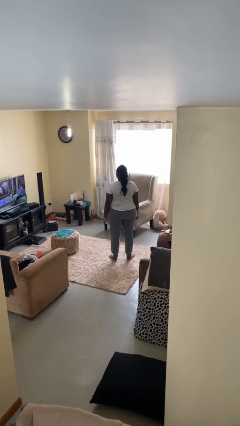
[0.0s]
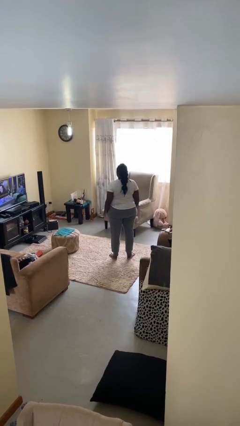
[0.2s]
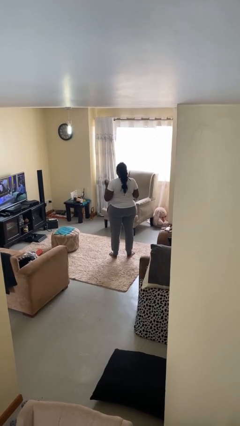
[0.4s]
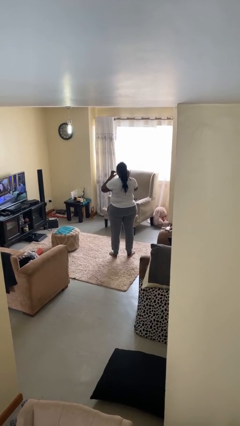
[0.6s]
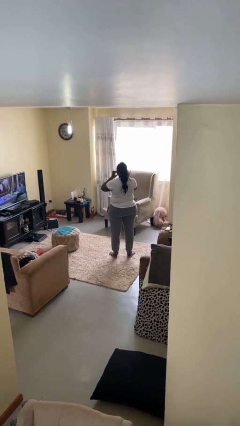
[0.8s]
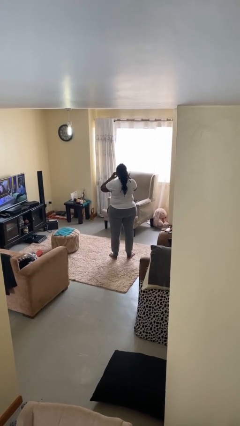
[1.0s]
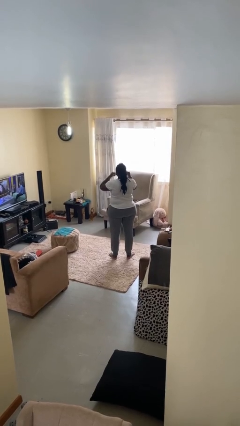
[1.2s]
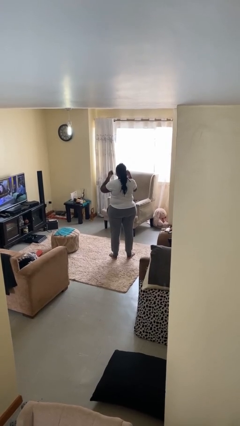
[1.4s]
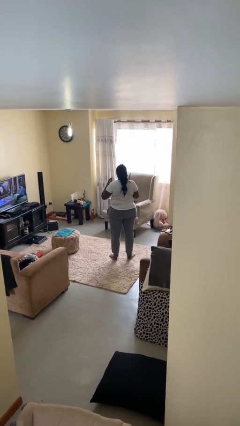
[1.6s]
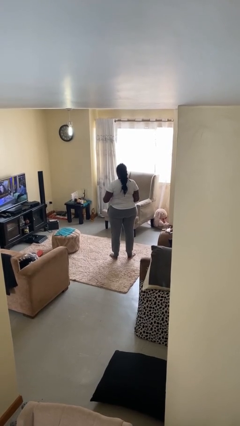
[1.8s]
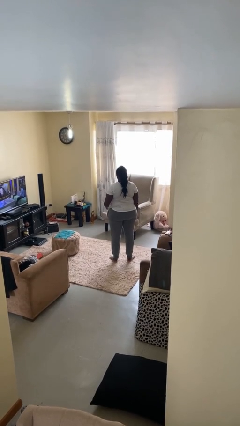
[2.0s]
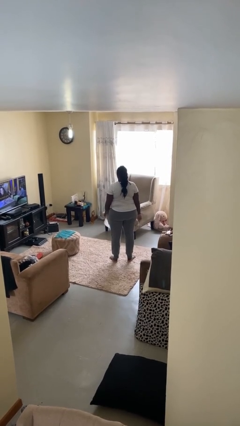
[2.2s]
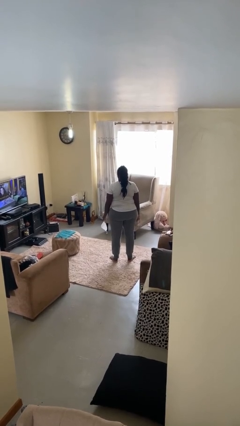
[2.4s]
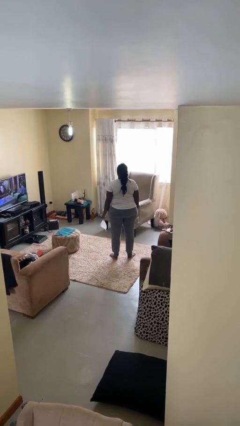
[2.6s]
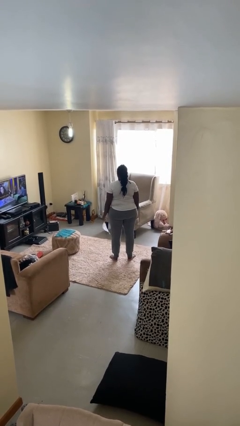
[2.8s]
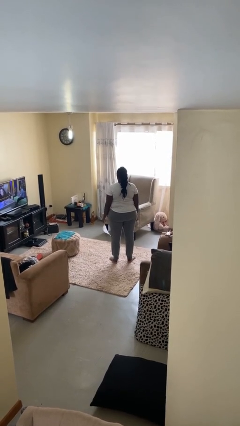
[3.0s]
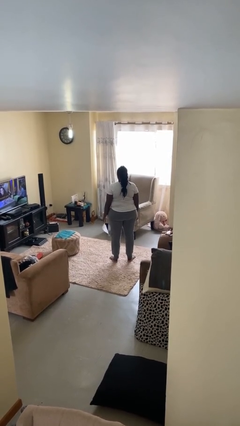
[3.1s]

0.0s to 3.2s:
person takes off facemask

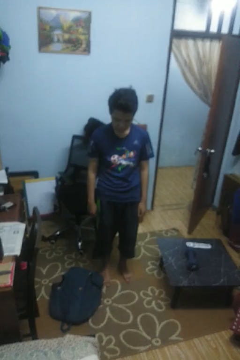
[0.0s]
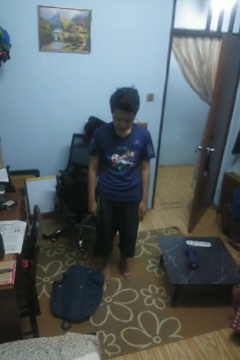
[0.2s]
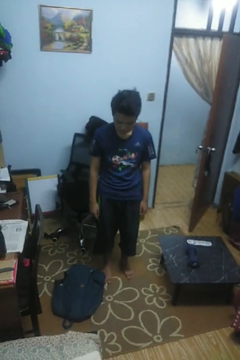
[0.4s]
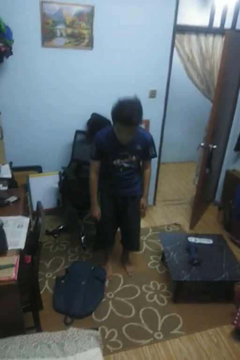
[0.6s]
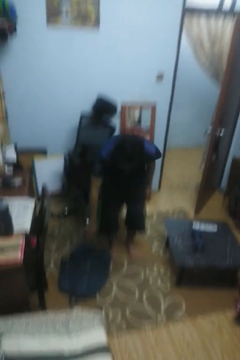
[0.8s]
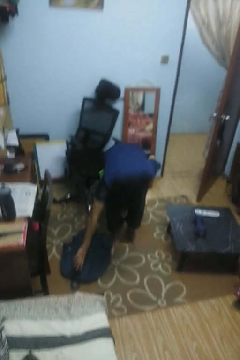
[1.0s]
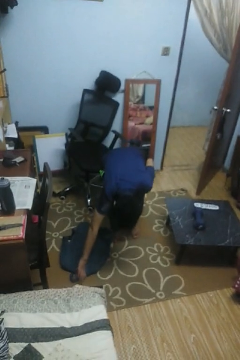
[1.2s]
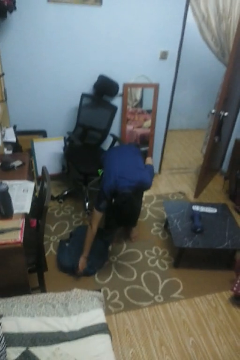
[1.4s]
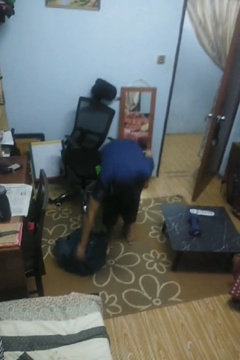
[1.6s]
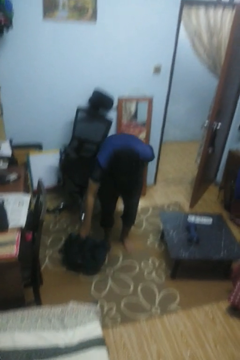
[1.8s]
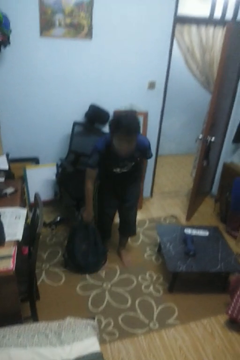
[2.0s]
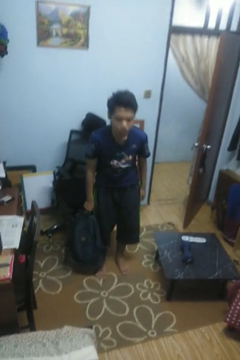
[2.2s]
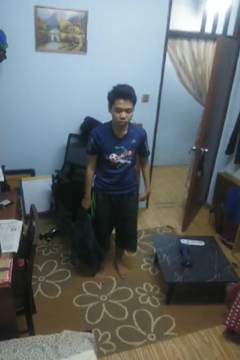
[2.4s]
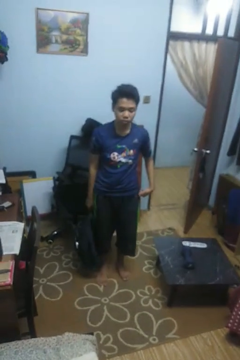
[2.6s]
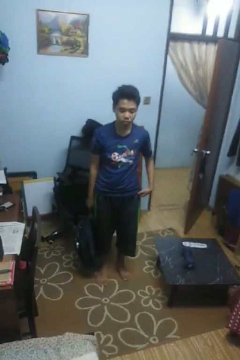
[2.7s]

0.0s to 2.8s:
person picks up object from floor

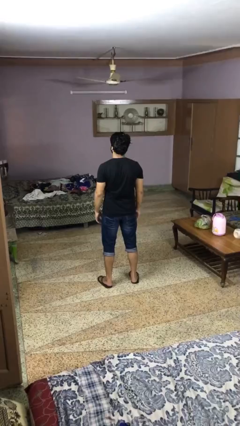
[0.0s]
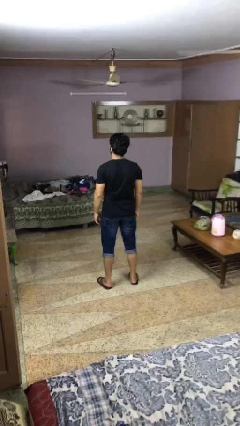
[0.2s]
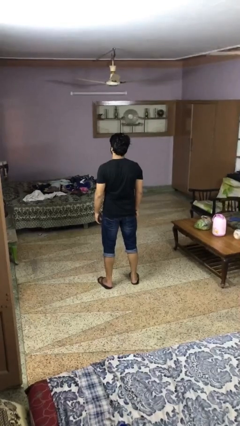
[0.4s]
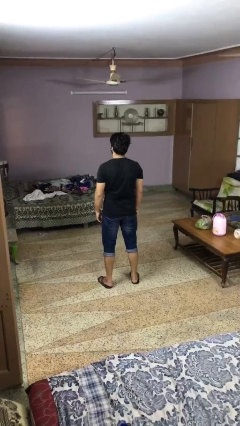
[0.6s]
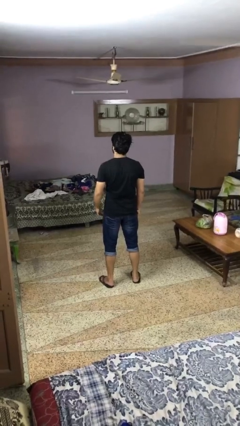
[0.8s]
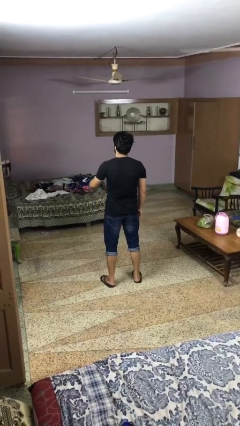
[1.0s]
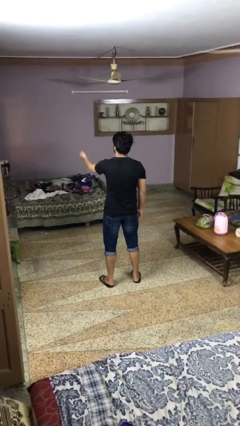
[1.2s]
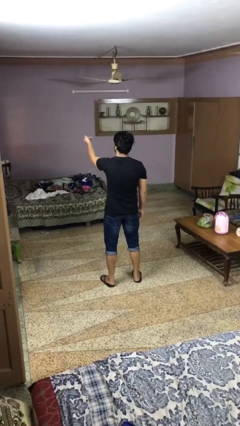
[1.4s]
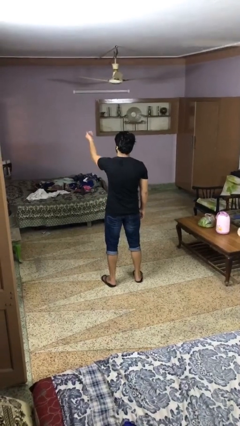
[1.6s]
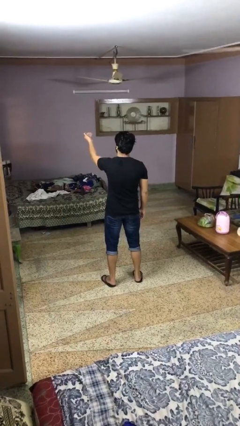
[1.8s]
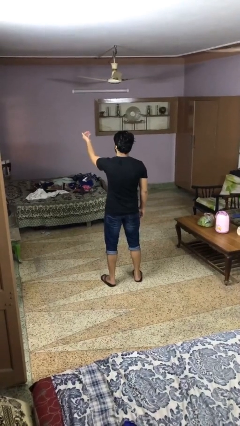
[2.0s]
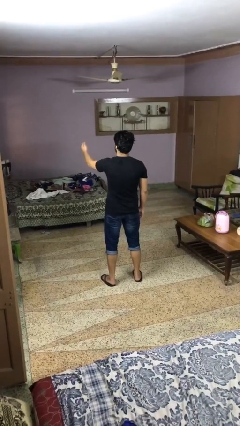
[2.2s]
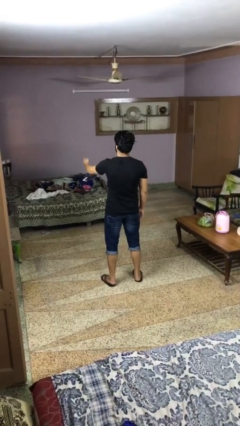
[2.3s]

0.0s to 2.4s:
person gestures come here

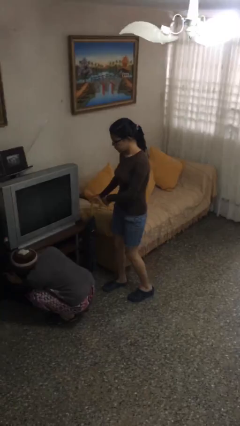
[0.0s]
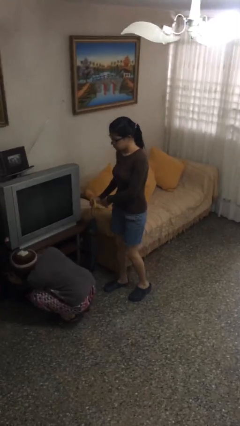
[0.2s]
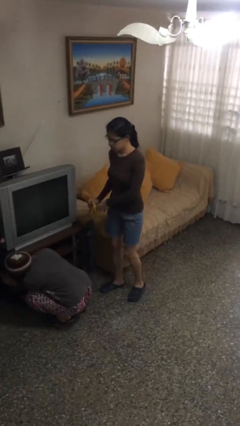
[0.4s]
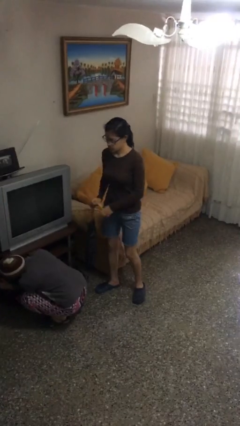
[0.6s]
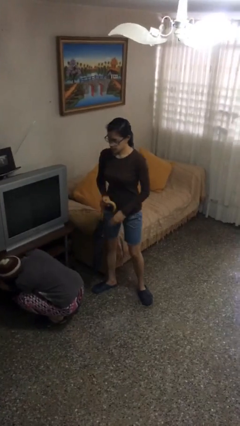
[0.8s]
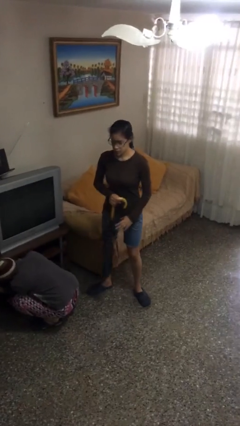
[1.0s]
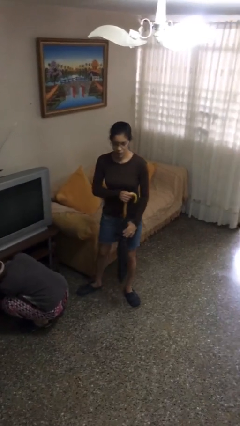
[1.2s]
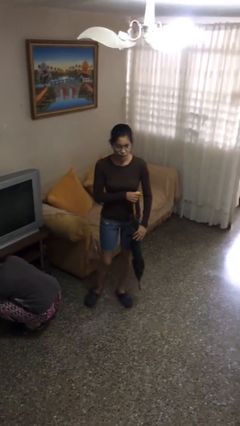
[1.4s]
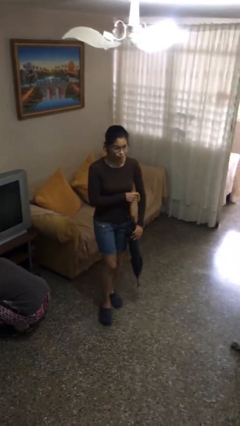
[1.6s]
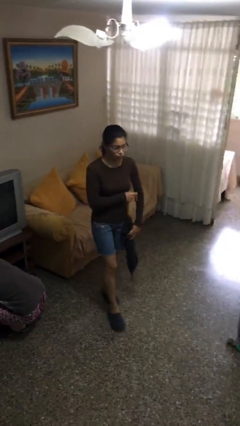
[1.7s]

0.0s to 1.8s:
person steals object from person

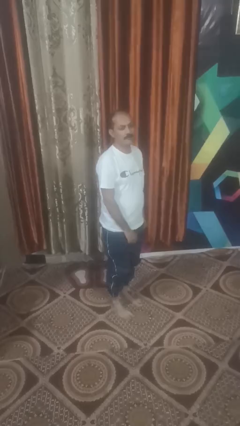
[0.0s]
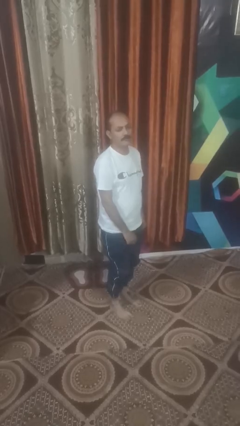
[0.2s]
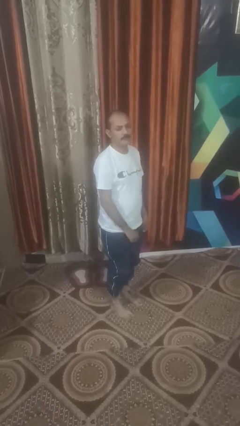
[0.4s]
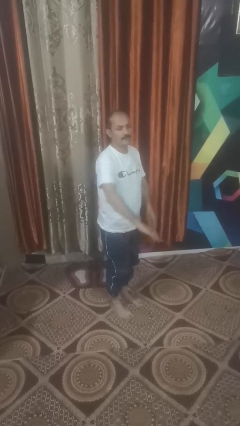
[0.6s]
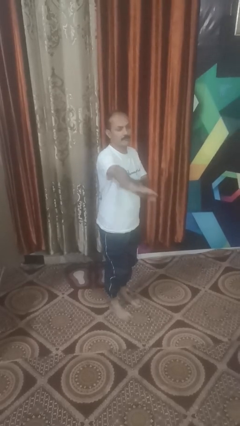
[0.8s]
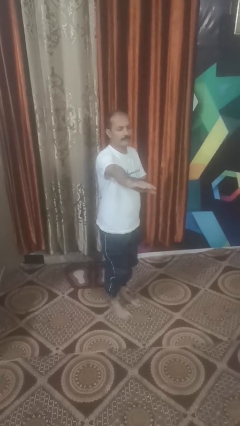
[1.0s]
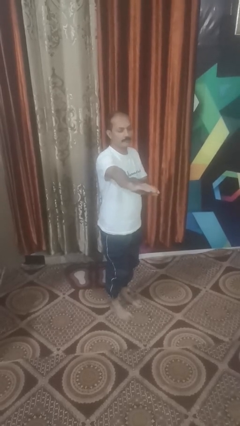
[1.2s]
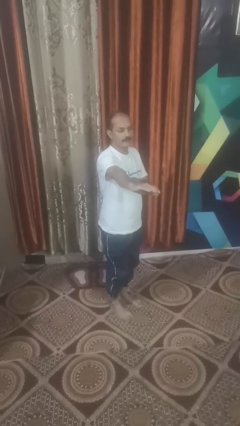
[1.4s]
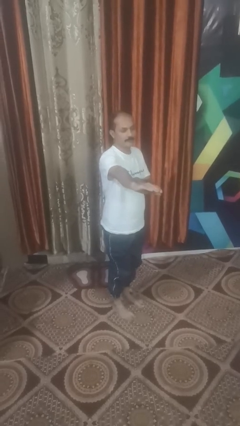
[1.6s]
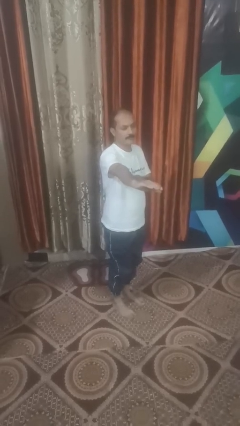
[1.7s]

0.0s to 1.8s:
person karate chop

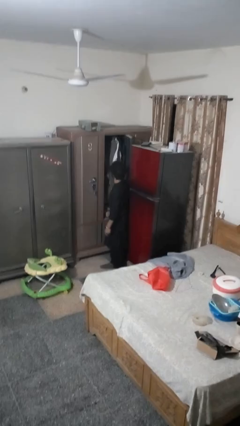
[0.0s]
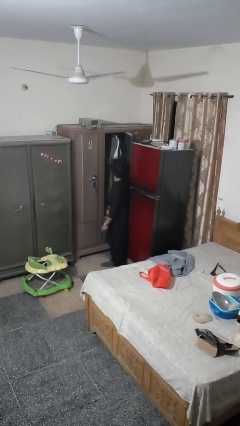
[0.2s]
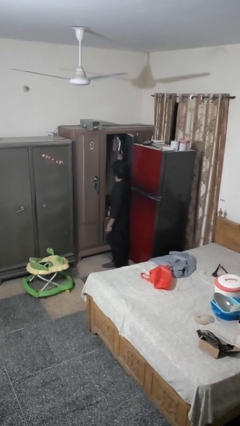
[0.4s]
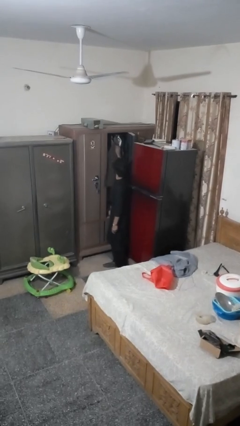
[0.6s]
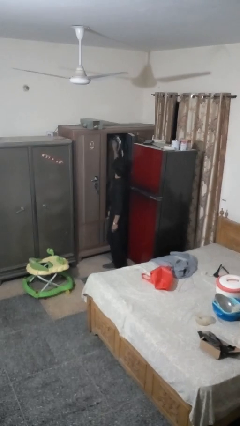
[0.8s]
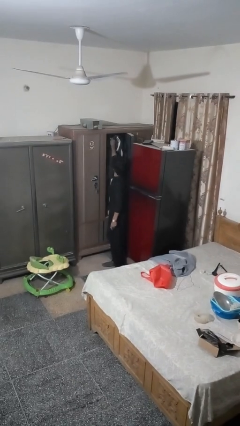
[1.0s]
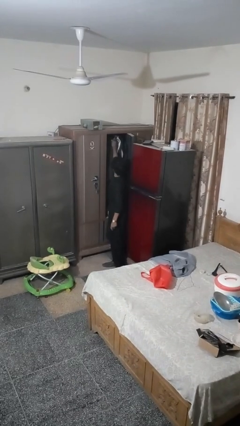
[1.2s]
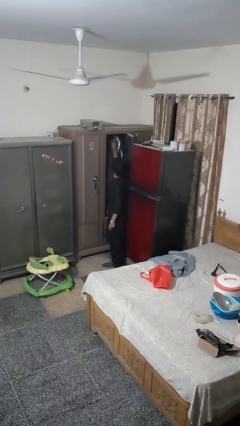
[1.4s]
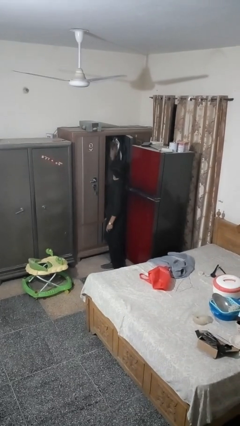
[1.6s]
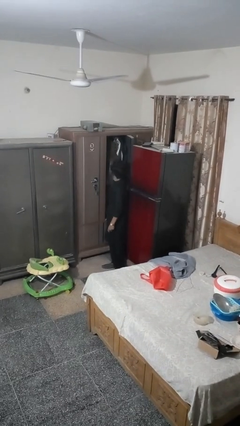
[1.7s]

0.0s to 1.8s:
person puts clothes into closet

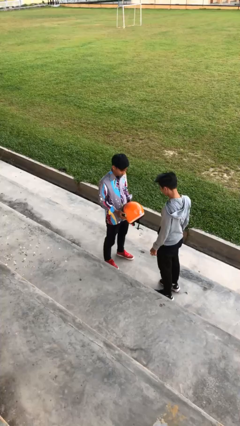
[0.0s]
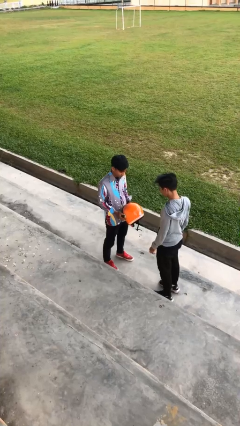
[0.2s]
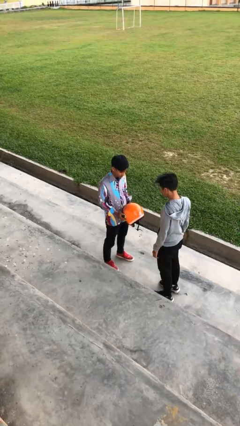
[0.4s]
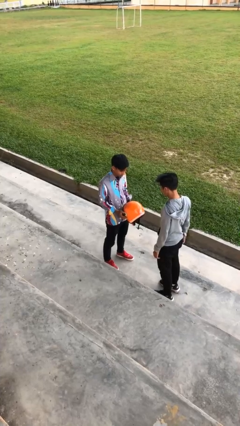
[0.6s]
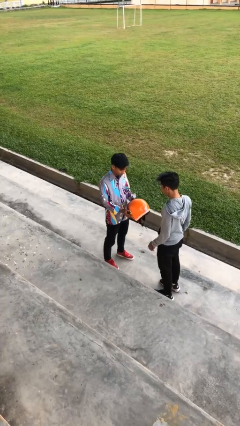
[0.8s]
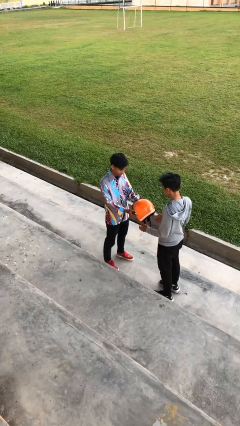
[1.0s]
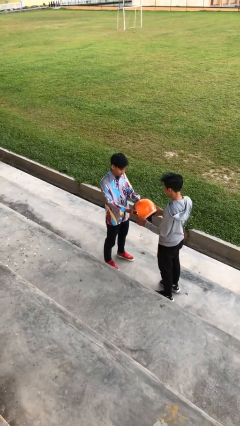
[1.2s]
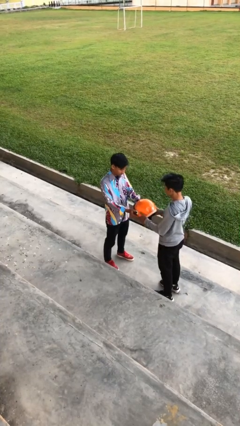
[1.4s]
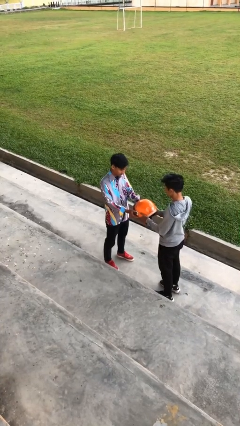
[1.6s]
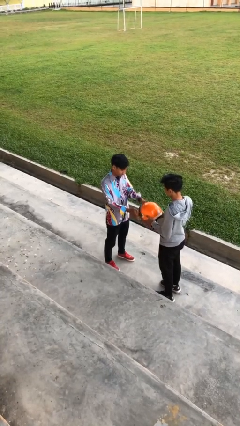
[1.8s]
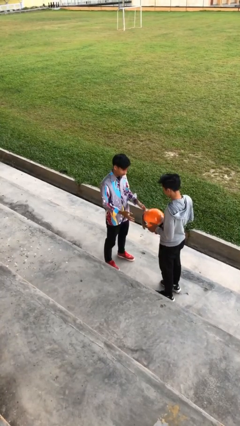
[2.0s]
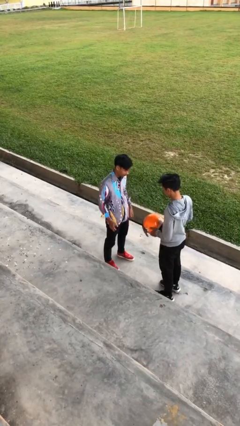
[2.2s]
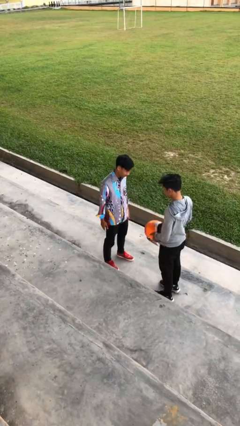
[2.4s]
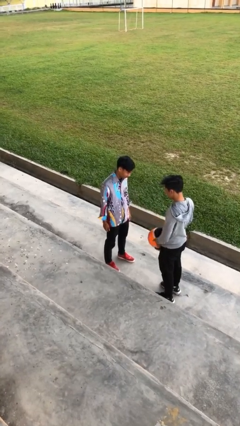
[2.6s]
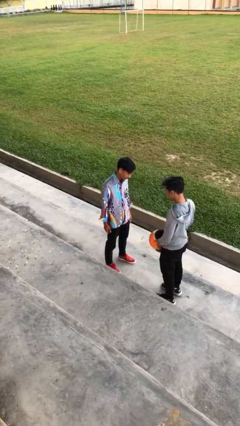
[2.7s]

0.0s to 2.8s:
person transfers object to person

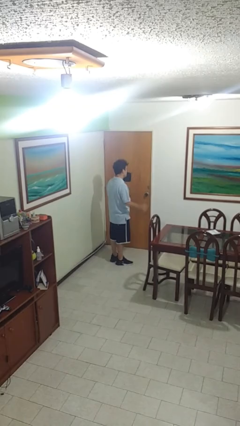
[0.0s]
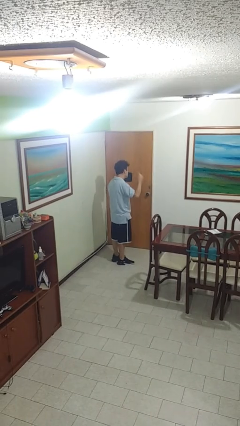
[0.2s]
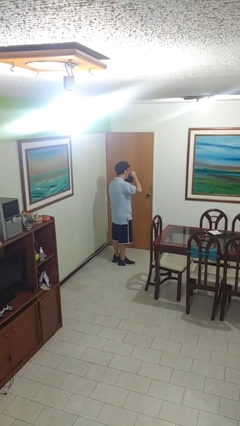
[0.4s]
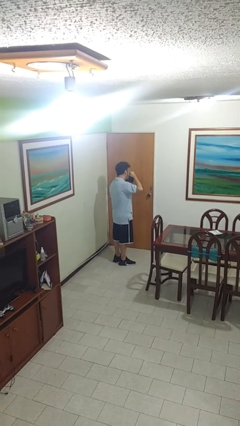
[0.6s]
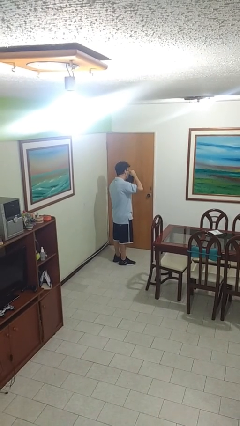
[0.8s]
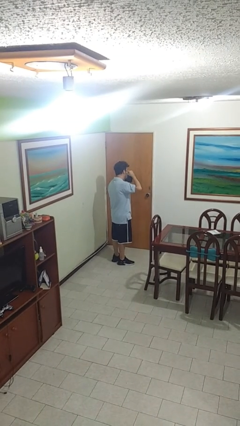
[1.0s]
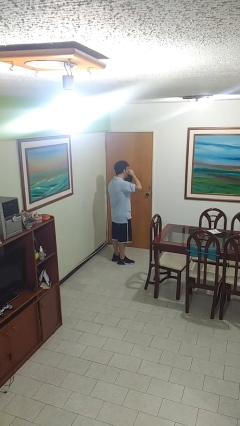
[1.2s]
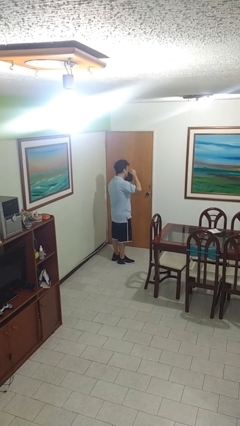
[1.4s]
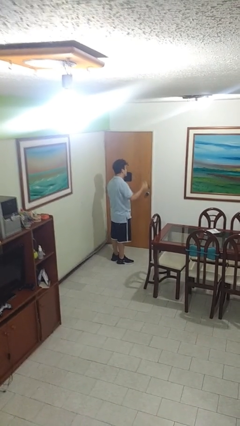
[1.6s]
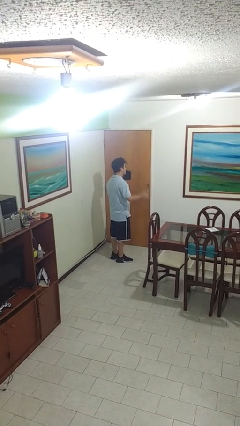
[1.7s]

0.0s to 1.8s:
person gestures listen closely
